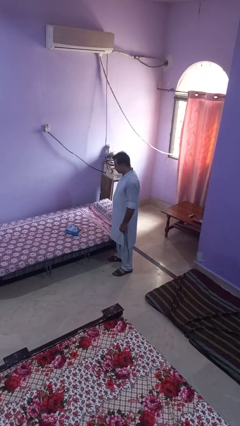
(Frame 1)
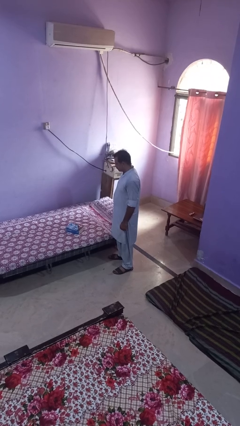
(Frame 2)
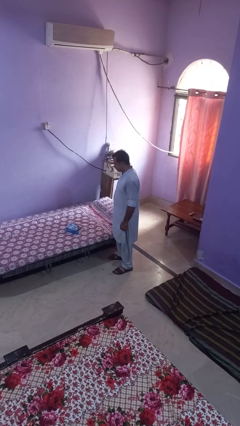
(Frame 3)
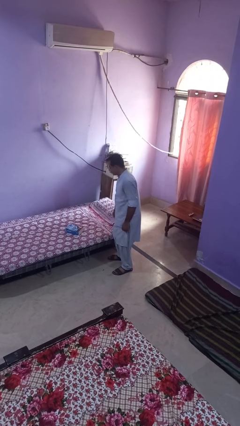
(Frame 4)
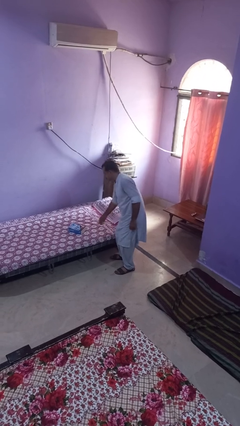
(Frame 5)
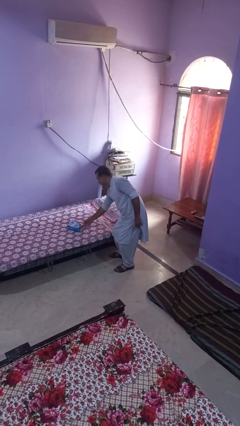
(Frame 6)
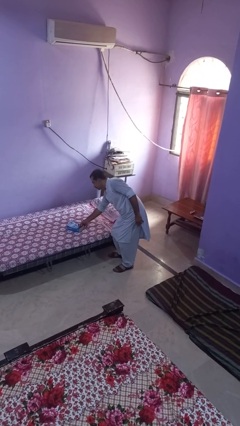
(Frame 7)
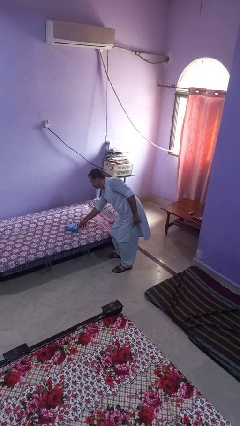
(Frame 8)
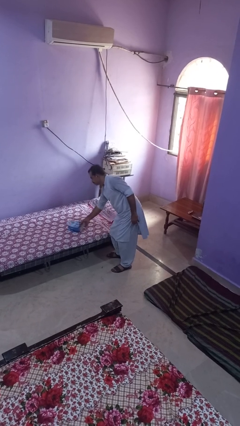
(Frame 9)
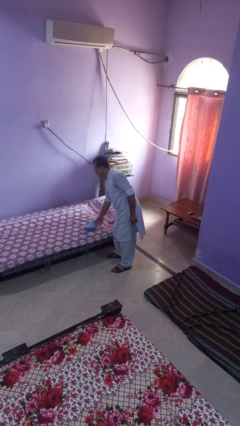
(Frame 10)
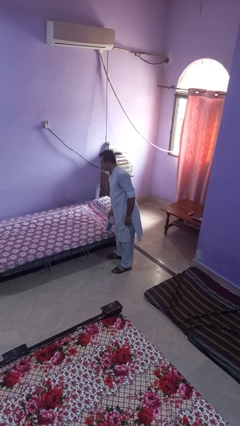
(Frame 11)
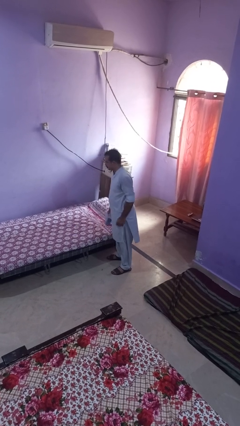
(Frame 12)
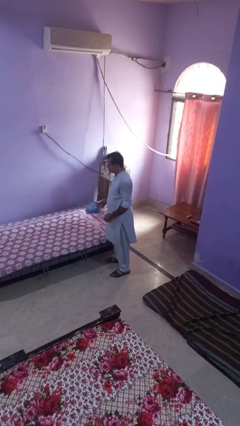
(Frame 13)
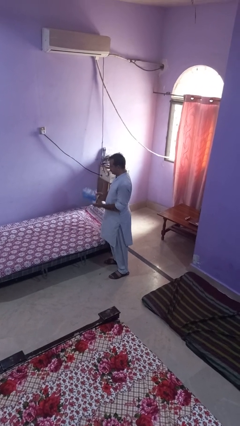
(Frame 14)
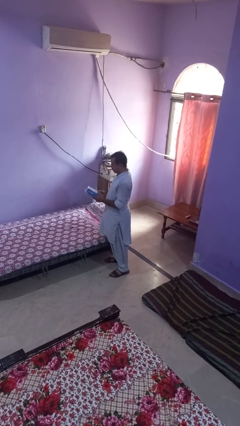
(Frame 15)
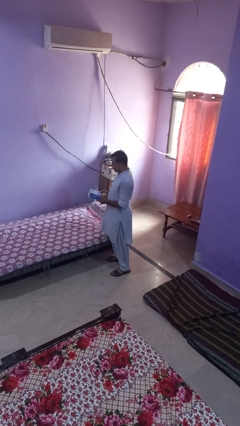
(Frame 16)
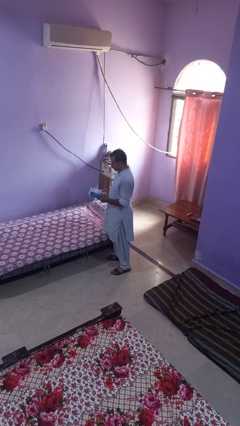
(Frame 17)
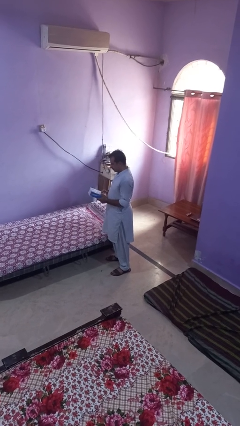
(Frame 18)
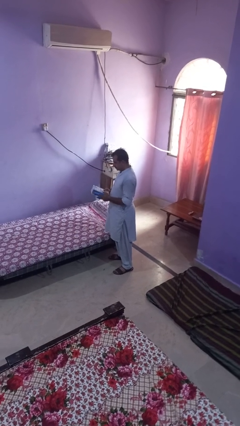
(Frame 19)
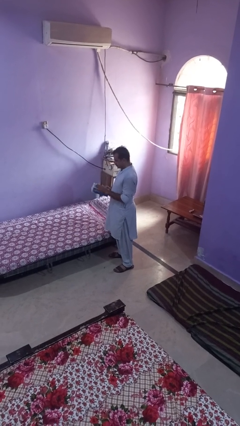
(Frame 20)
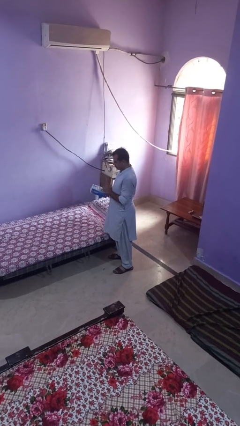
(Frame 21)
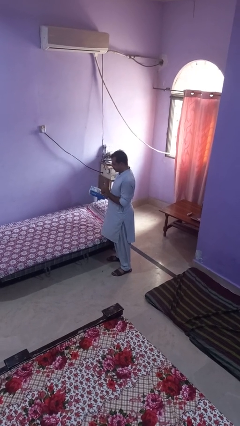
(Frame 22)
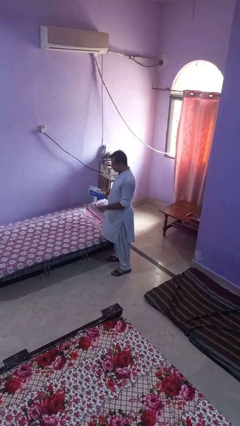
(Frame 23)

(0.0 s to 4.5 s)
person picks up object from bed

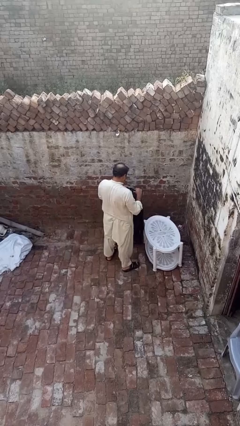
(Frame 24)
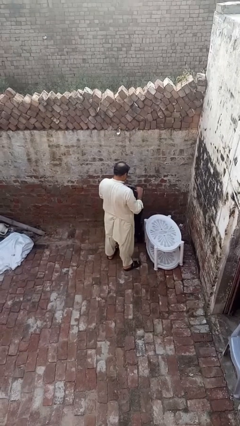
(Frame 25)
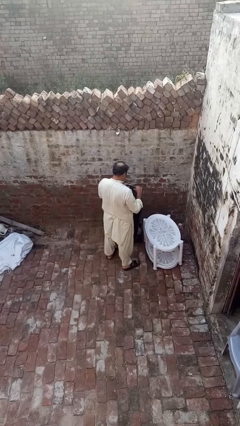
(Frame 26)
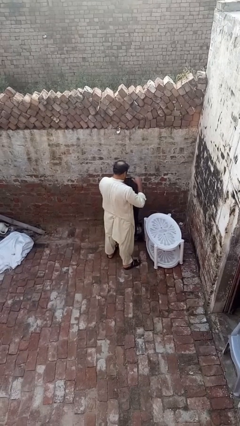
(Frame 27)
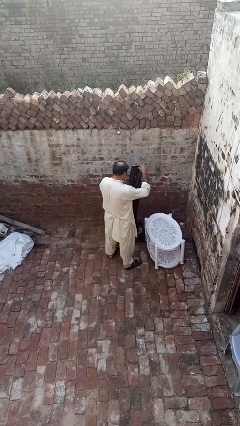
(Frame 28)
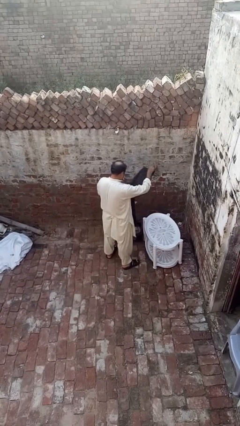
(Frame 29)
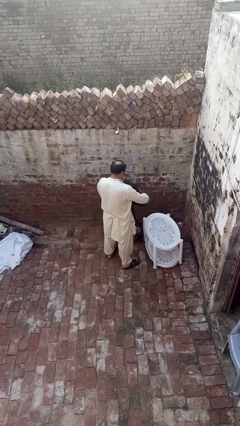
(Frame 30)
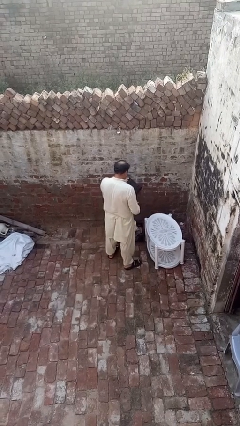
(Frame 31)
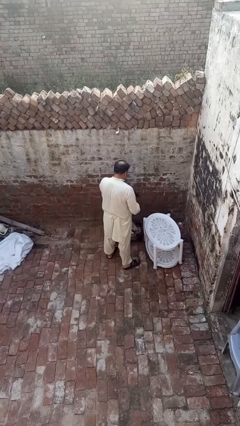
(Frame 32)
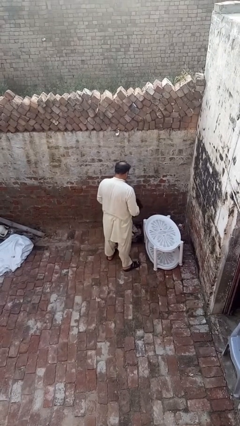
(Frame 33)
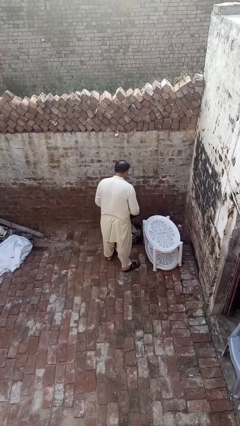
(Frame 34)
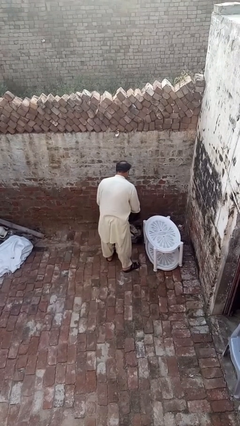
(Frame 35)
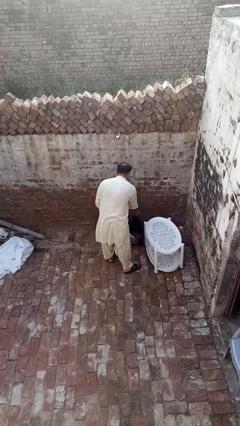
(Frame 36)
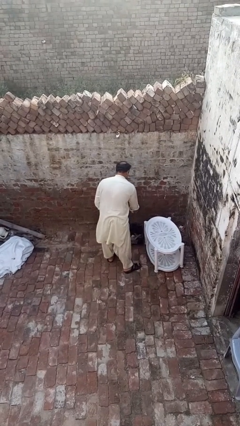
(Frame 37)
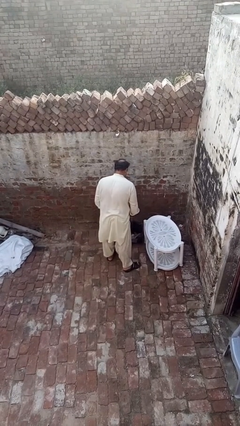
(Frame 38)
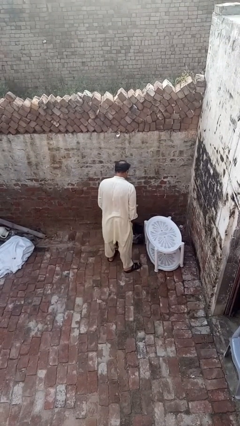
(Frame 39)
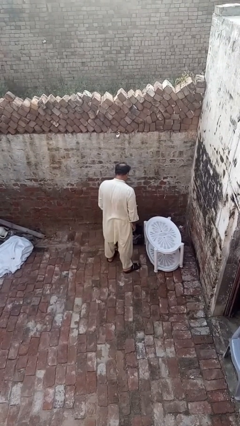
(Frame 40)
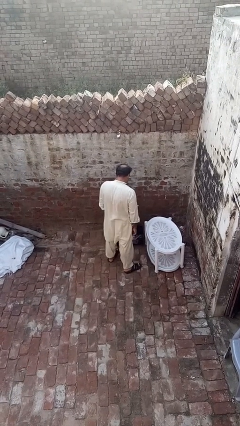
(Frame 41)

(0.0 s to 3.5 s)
person folds pants

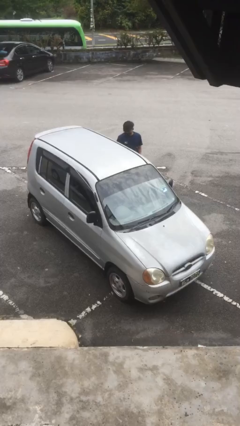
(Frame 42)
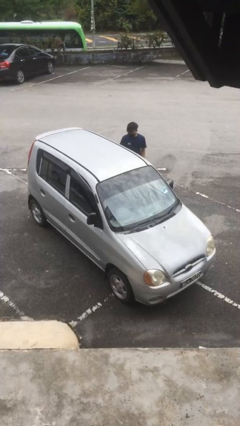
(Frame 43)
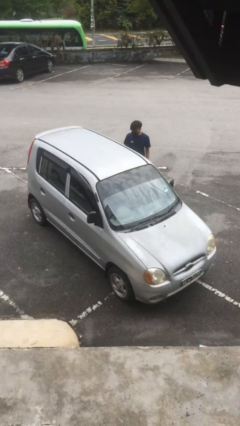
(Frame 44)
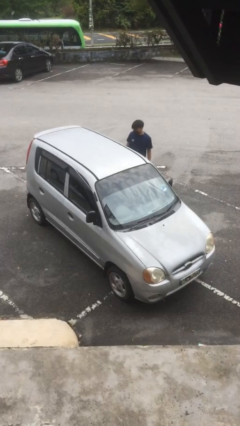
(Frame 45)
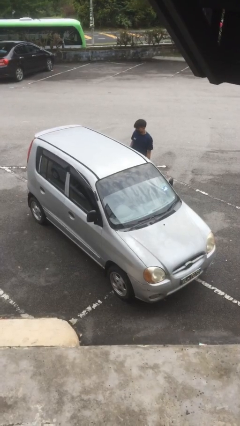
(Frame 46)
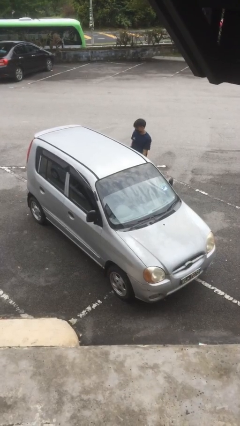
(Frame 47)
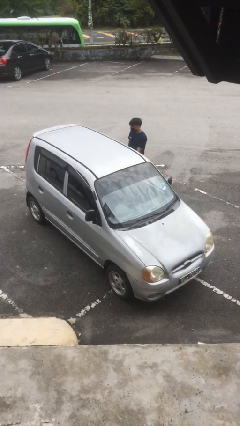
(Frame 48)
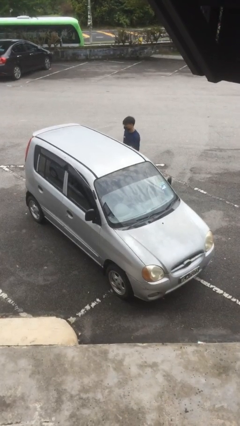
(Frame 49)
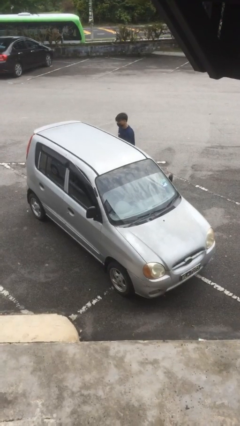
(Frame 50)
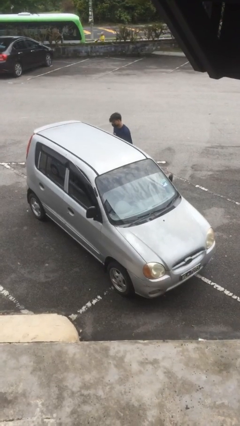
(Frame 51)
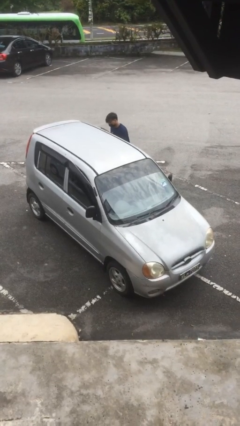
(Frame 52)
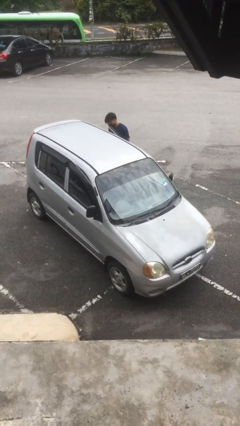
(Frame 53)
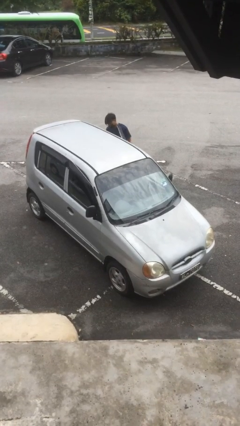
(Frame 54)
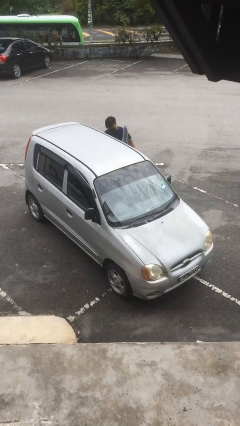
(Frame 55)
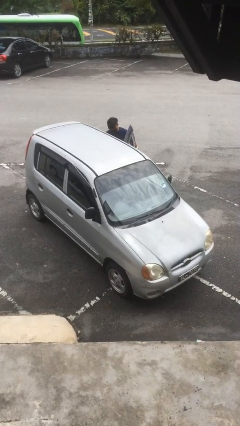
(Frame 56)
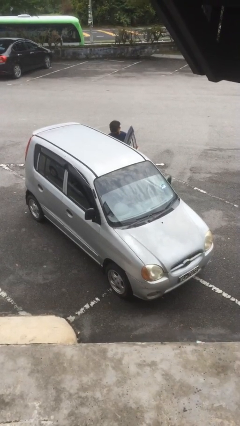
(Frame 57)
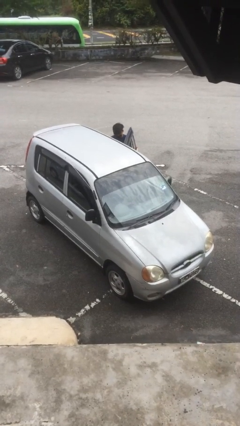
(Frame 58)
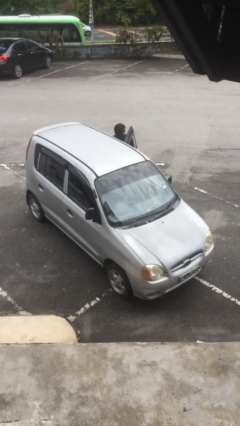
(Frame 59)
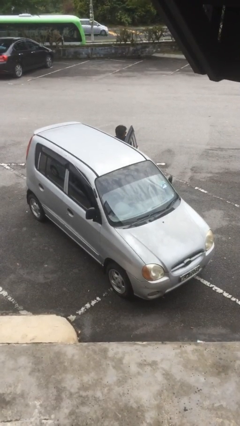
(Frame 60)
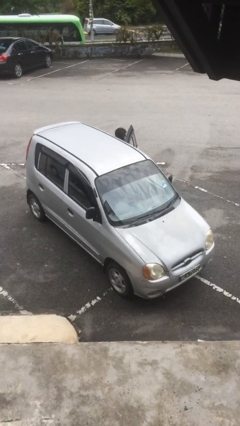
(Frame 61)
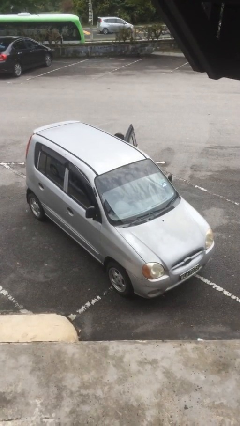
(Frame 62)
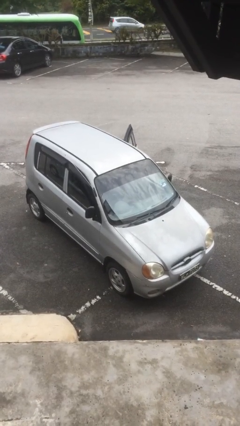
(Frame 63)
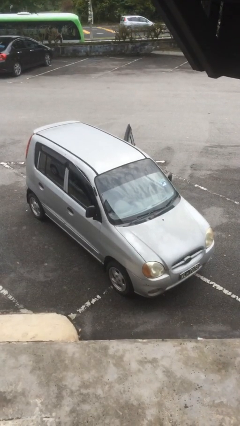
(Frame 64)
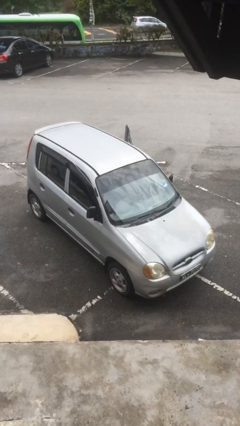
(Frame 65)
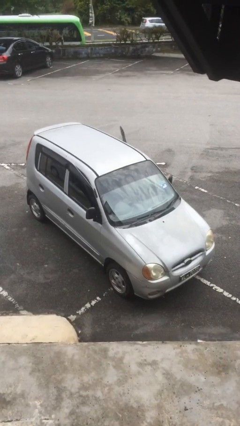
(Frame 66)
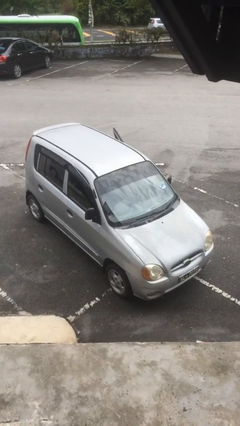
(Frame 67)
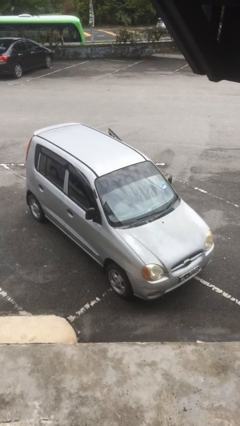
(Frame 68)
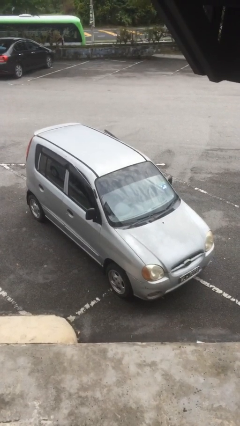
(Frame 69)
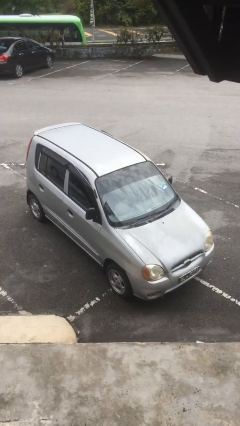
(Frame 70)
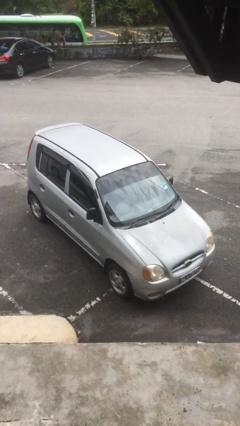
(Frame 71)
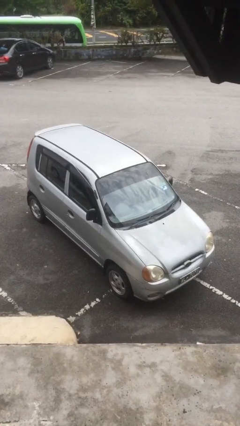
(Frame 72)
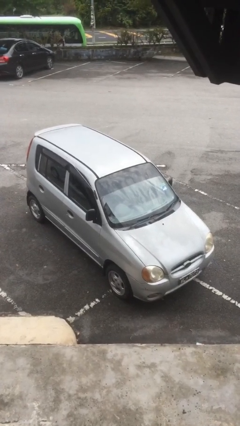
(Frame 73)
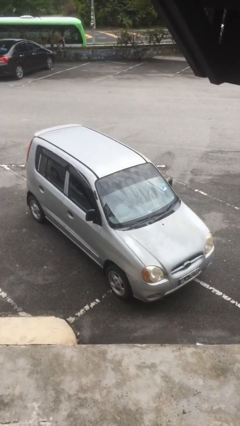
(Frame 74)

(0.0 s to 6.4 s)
car picks up person

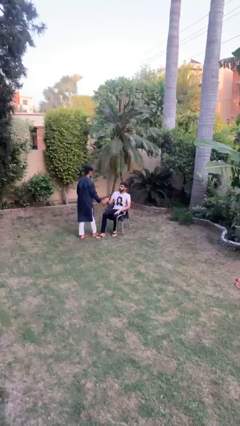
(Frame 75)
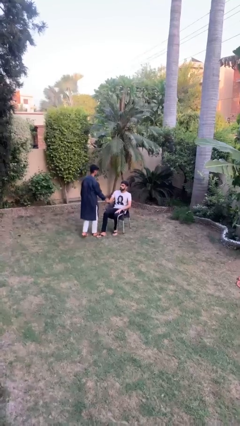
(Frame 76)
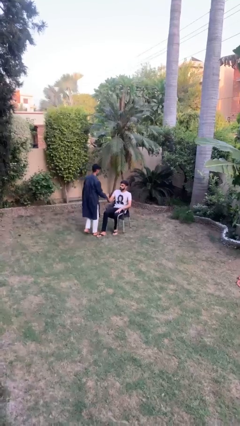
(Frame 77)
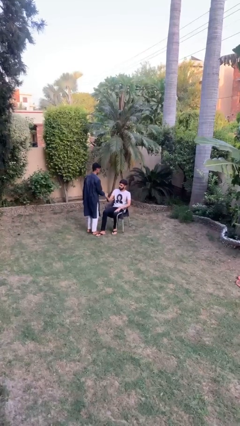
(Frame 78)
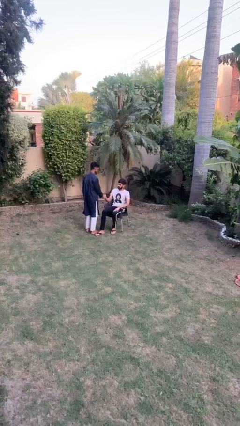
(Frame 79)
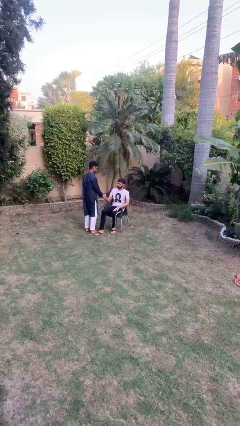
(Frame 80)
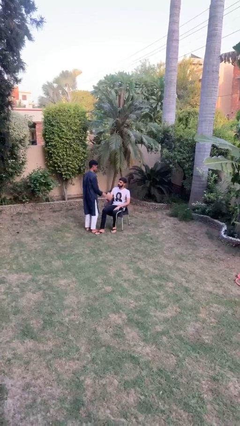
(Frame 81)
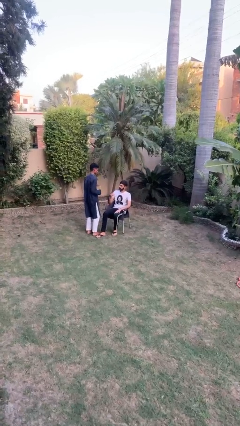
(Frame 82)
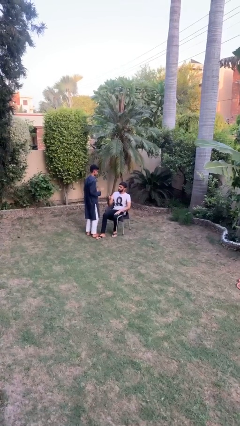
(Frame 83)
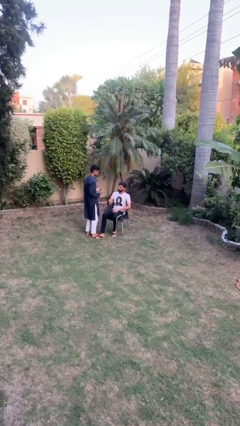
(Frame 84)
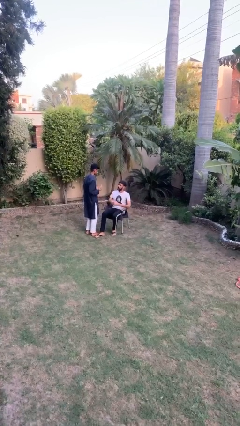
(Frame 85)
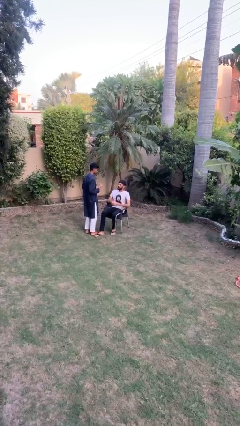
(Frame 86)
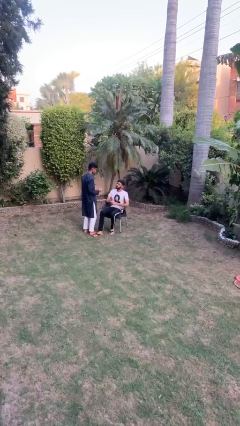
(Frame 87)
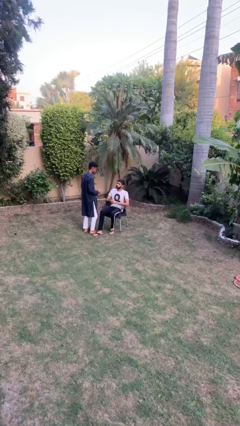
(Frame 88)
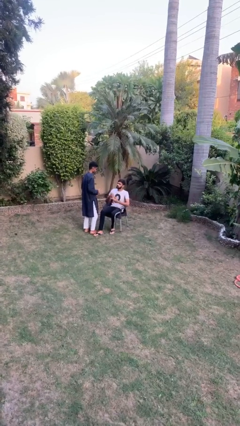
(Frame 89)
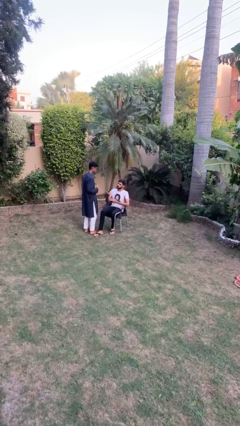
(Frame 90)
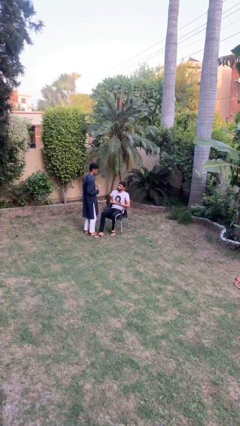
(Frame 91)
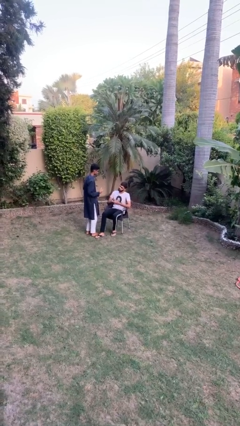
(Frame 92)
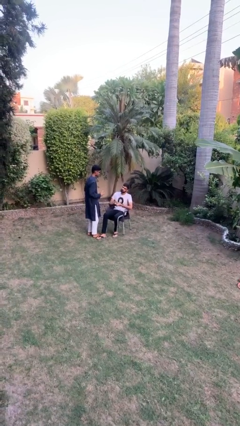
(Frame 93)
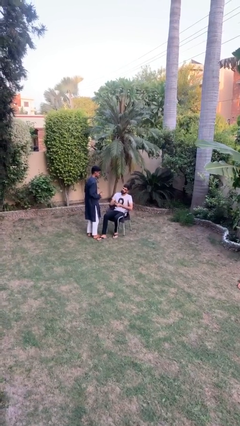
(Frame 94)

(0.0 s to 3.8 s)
person shakes hand
